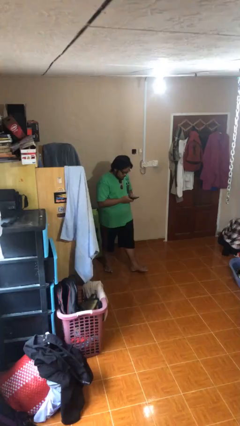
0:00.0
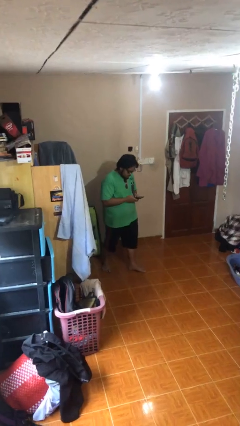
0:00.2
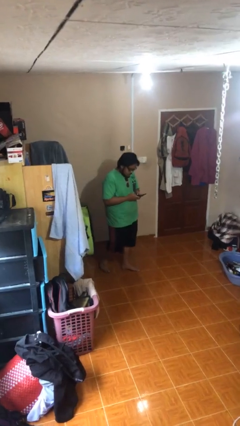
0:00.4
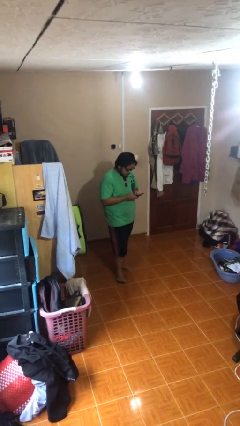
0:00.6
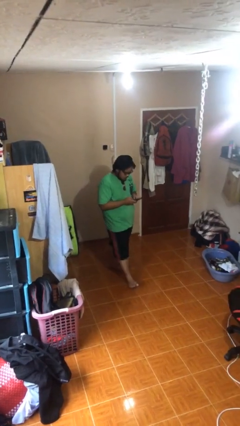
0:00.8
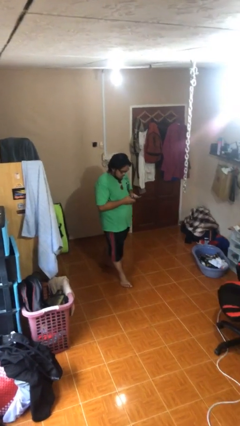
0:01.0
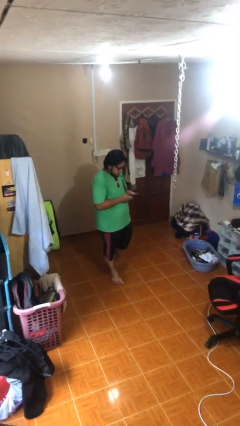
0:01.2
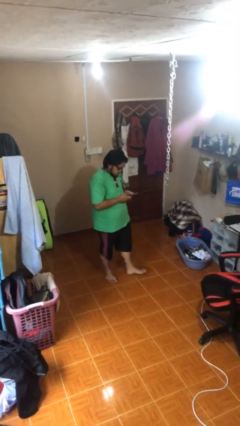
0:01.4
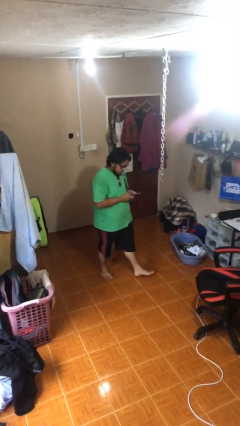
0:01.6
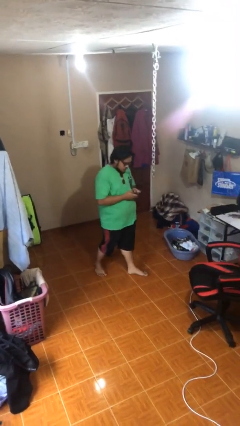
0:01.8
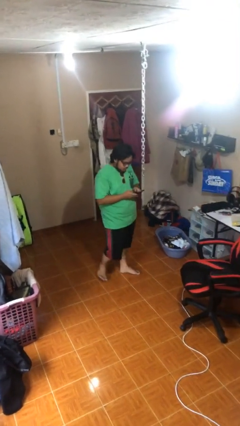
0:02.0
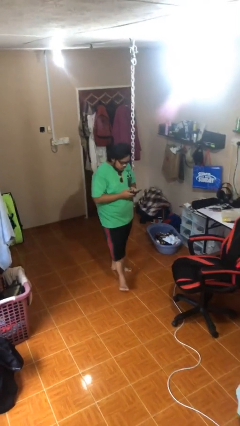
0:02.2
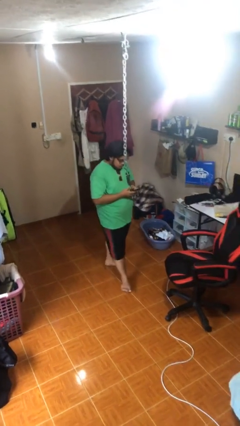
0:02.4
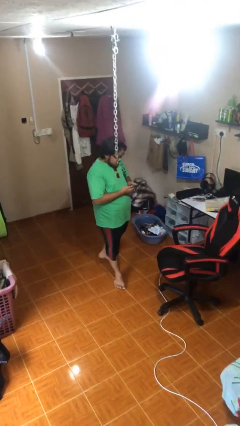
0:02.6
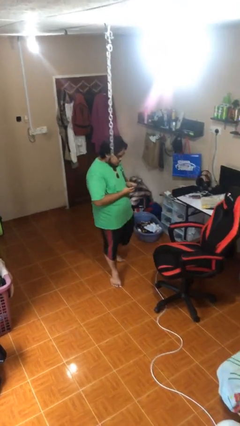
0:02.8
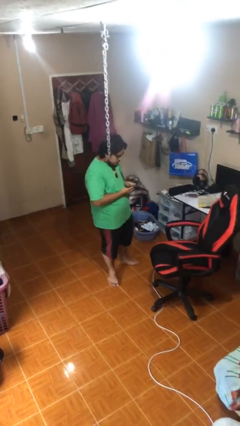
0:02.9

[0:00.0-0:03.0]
person texts on phone

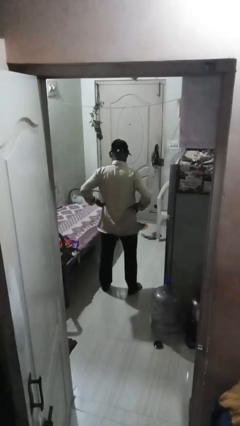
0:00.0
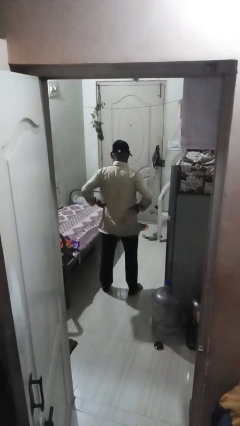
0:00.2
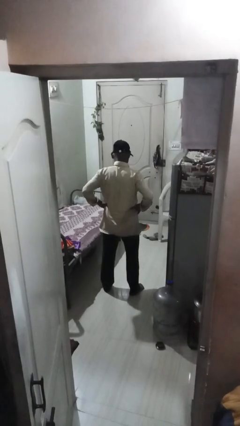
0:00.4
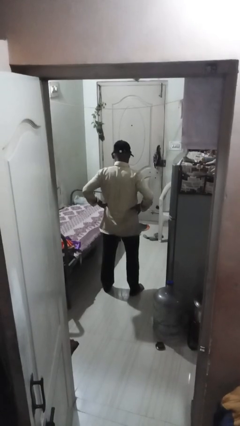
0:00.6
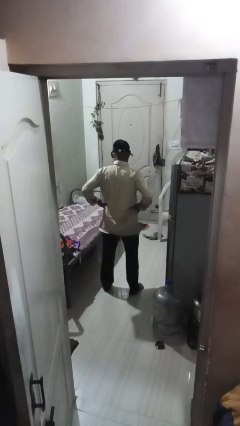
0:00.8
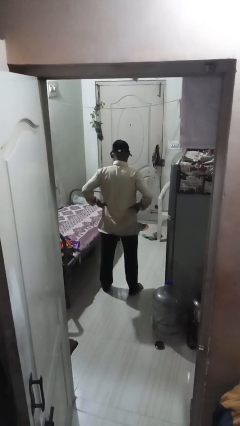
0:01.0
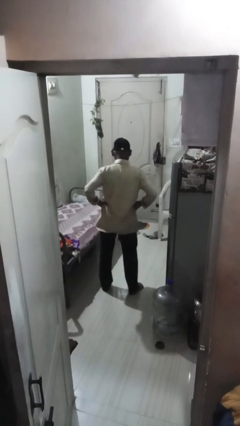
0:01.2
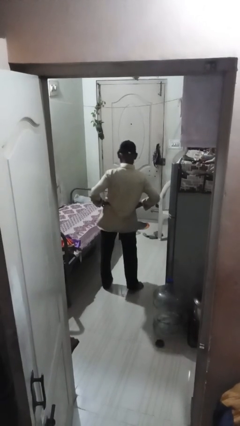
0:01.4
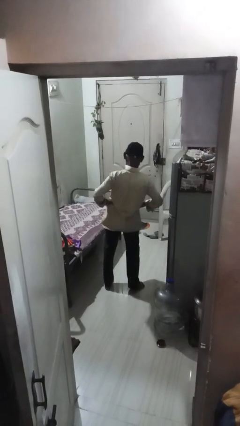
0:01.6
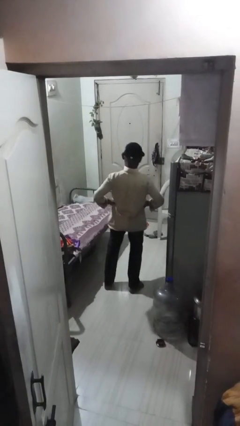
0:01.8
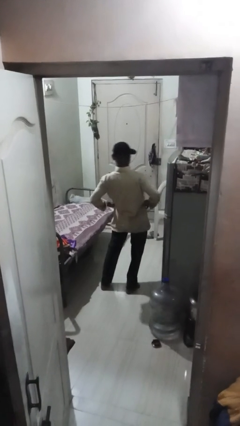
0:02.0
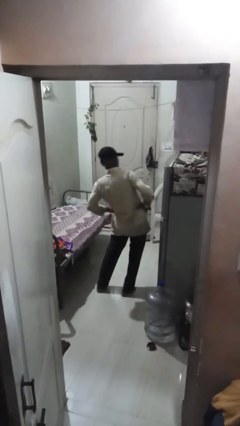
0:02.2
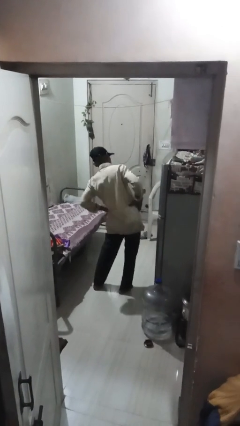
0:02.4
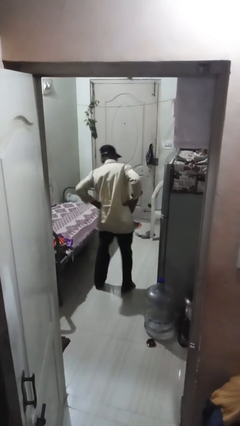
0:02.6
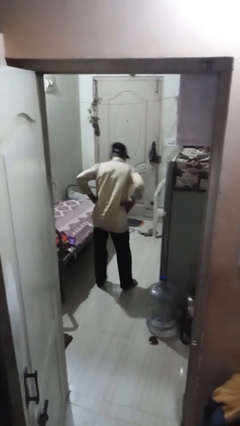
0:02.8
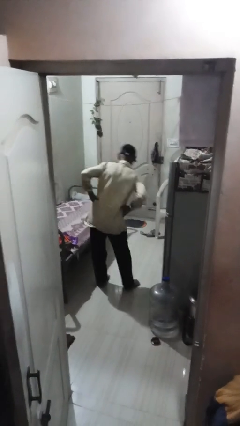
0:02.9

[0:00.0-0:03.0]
person wiggles hips

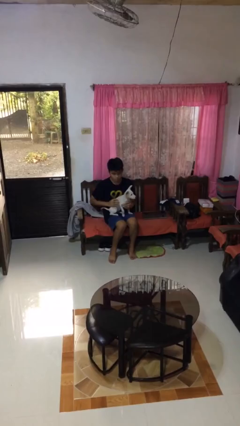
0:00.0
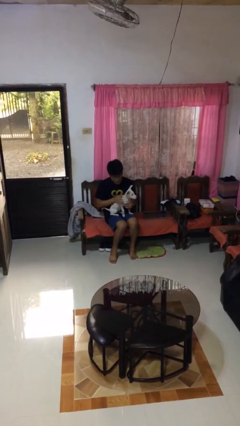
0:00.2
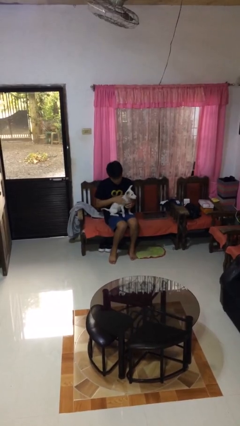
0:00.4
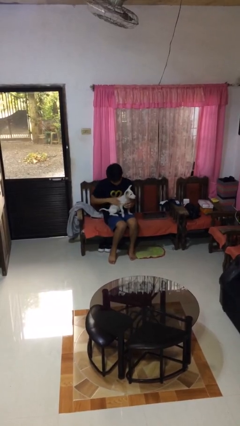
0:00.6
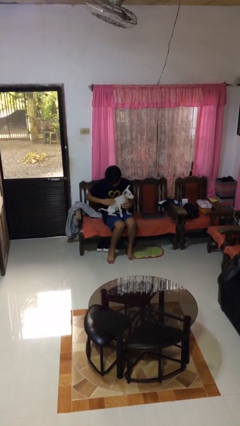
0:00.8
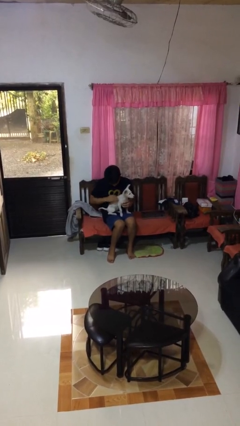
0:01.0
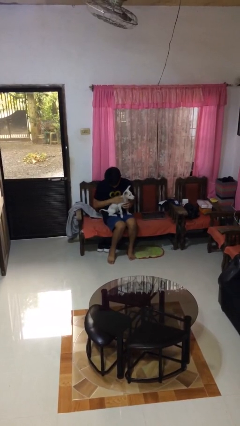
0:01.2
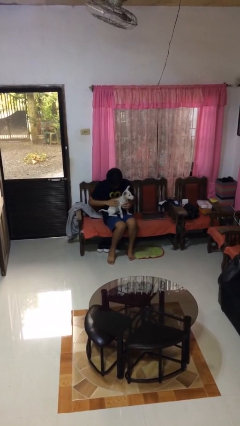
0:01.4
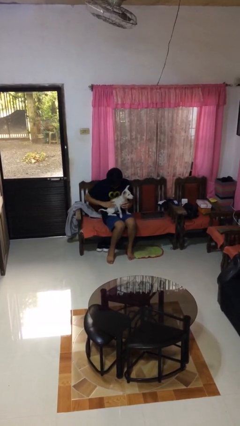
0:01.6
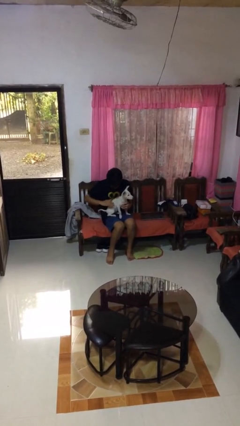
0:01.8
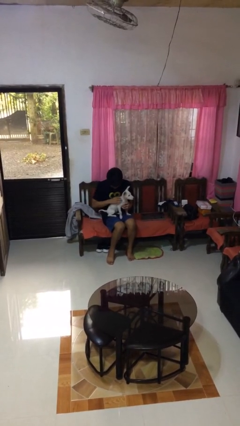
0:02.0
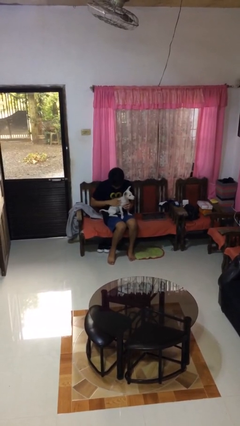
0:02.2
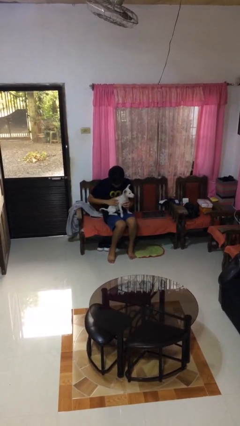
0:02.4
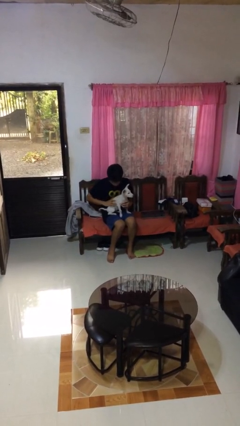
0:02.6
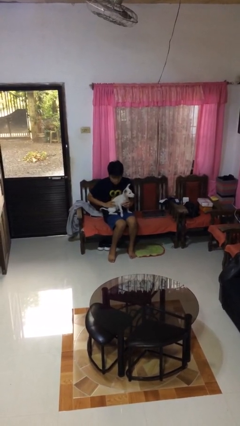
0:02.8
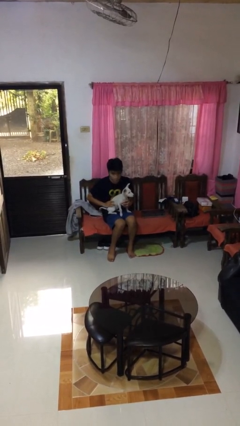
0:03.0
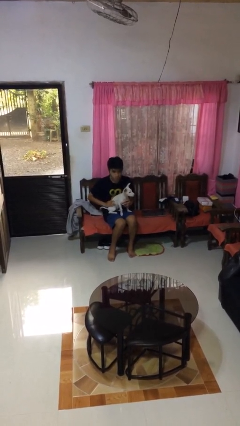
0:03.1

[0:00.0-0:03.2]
person pets dog

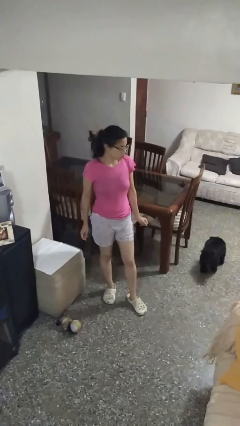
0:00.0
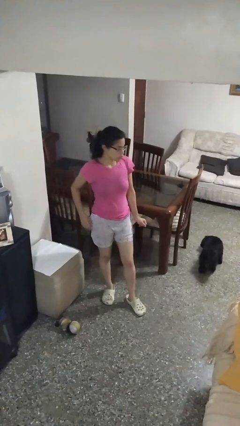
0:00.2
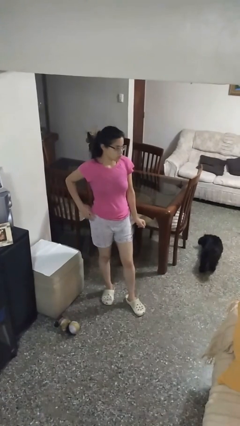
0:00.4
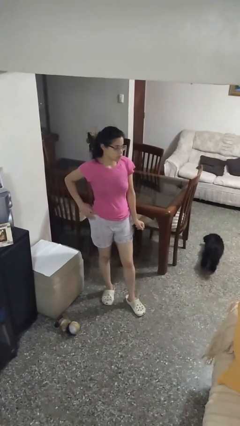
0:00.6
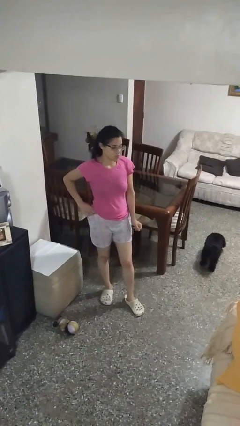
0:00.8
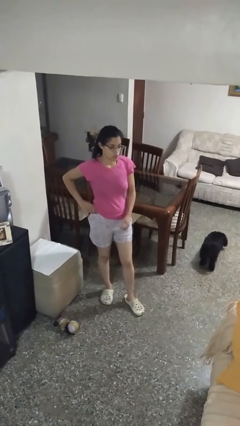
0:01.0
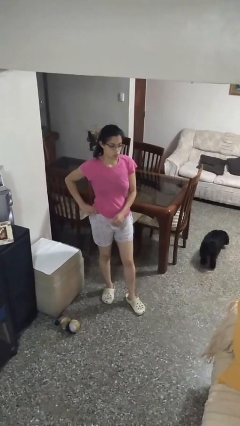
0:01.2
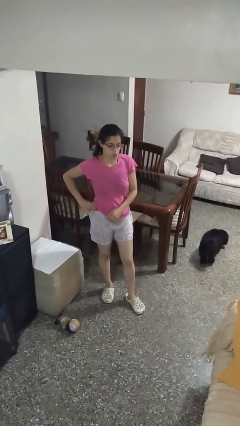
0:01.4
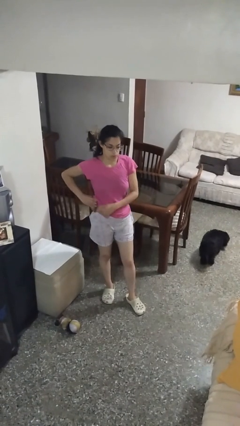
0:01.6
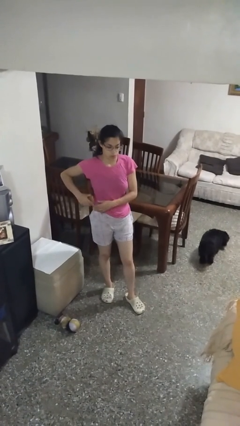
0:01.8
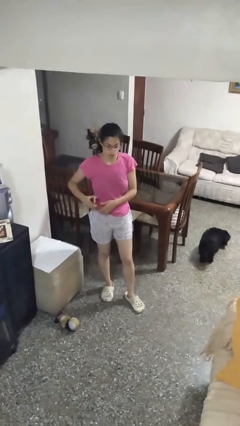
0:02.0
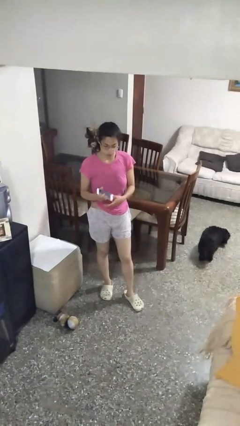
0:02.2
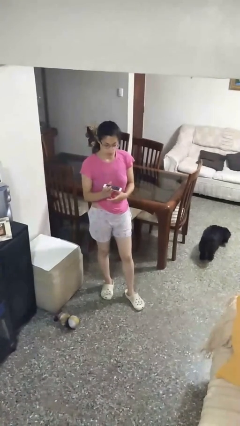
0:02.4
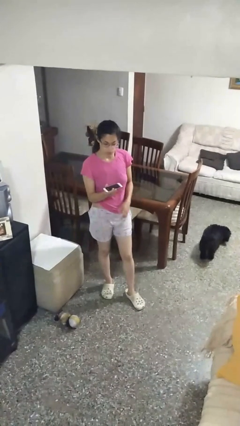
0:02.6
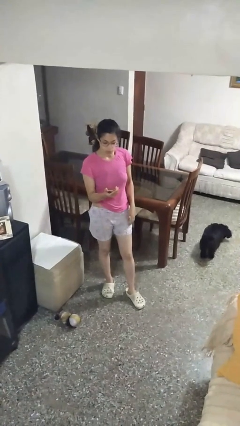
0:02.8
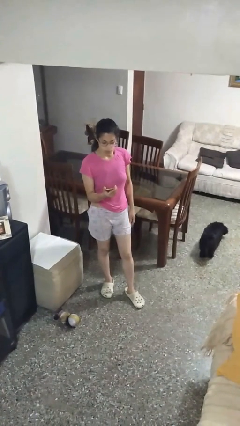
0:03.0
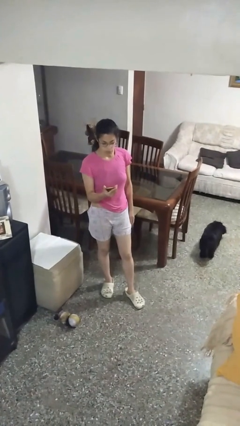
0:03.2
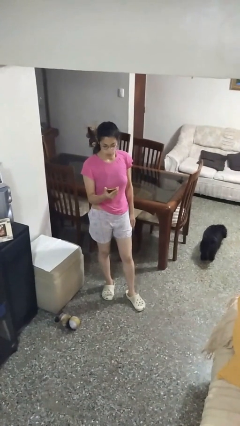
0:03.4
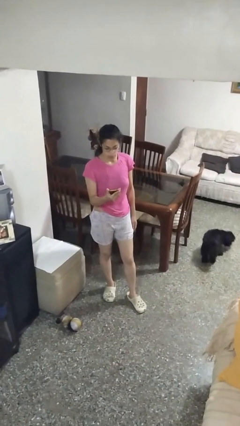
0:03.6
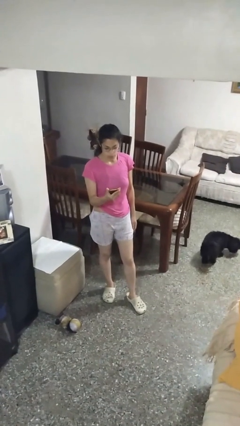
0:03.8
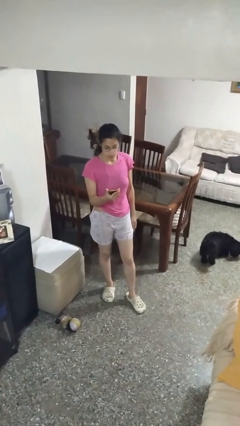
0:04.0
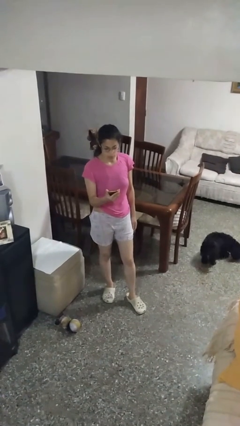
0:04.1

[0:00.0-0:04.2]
person takes phone from pocket

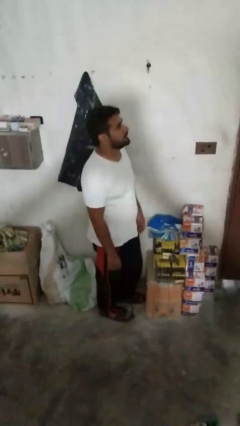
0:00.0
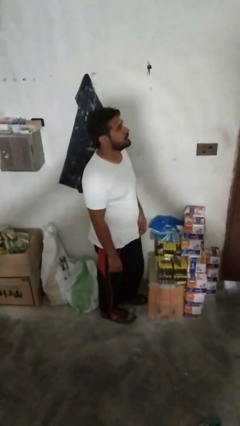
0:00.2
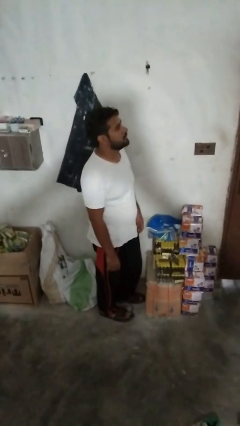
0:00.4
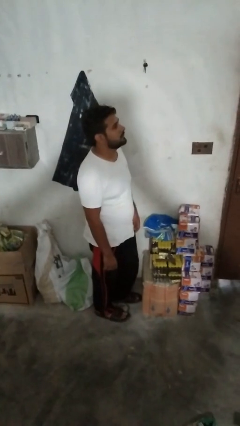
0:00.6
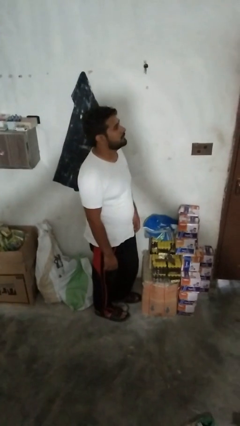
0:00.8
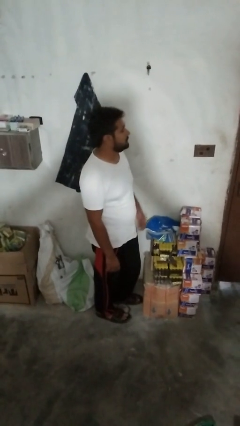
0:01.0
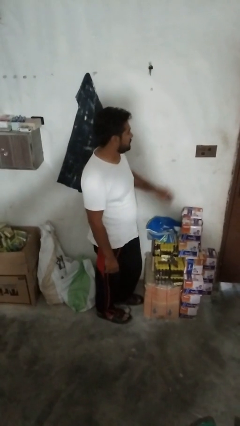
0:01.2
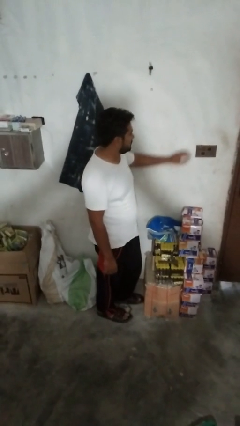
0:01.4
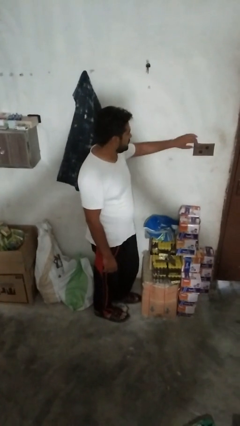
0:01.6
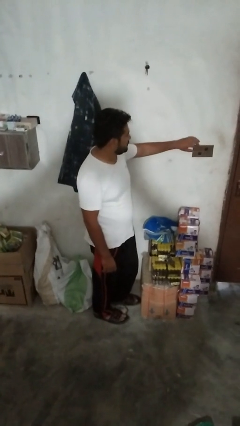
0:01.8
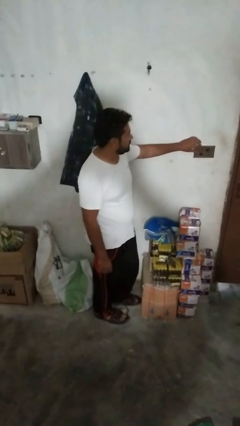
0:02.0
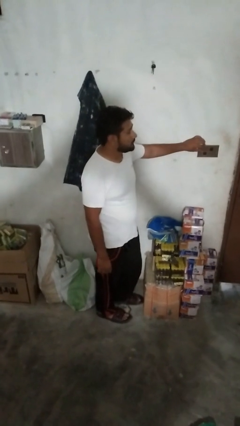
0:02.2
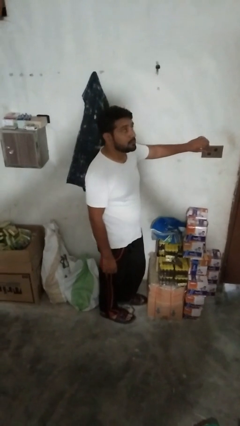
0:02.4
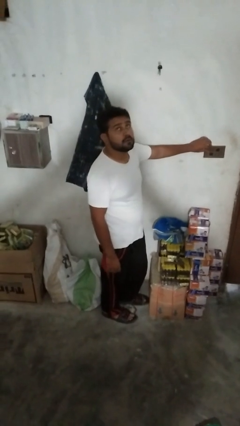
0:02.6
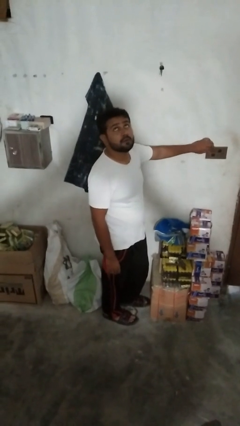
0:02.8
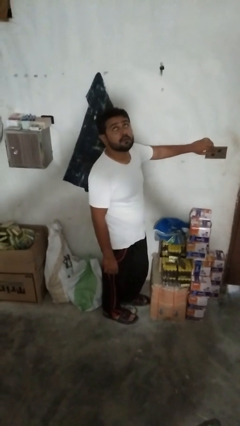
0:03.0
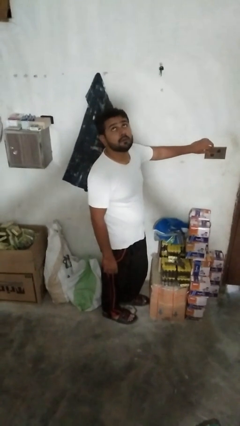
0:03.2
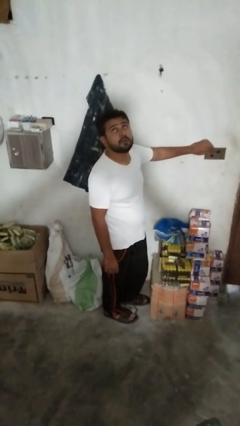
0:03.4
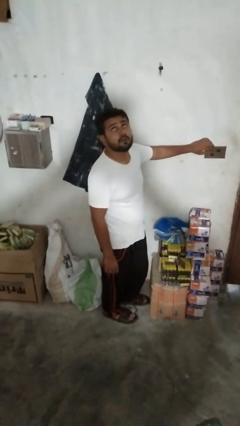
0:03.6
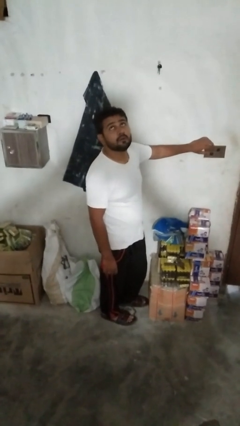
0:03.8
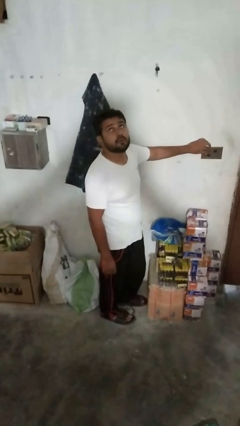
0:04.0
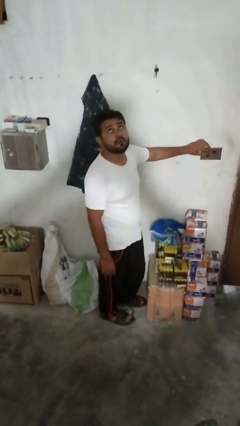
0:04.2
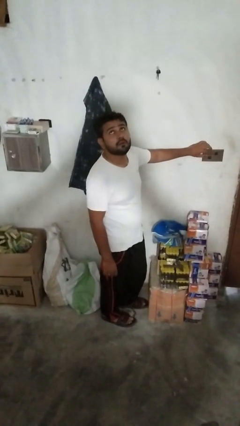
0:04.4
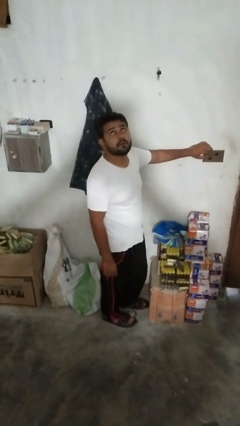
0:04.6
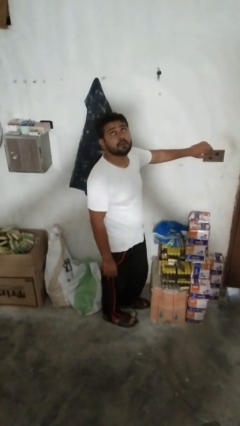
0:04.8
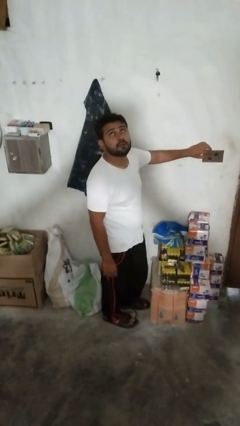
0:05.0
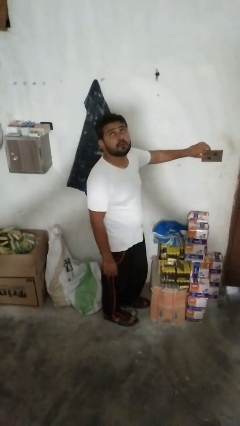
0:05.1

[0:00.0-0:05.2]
person adjusts thermostat
